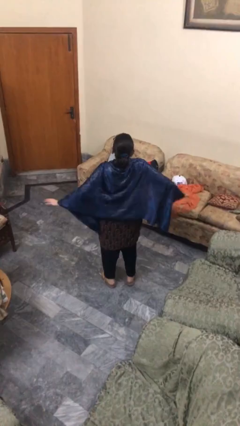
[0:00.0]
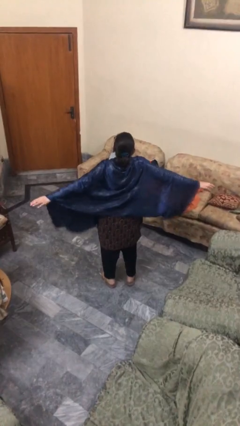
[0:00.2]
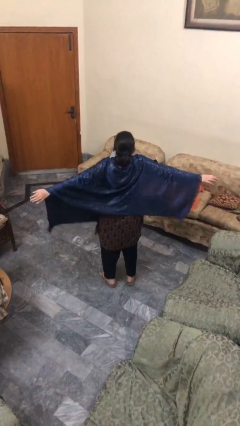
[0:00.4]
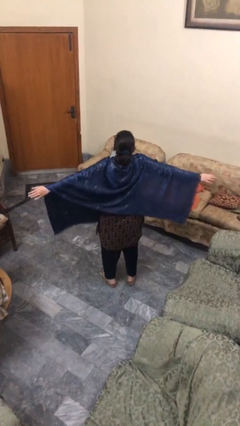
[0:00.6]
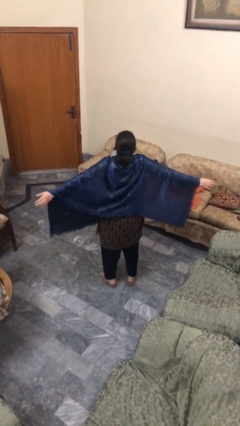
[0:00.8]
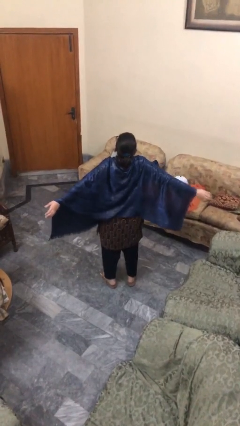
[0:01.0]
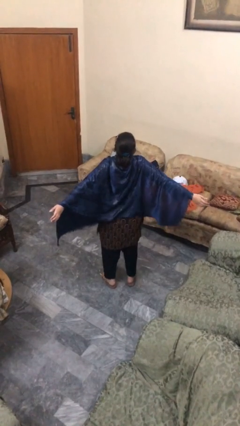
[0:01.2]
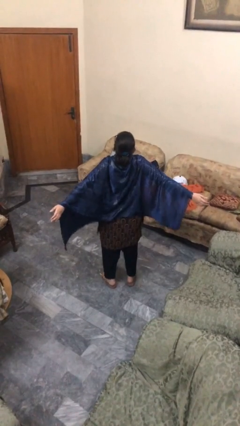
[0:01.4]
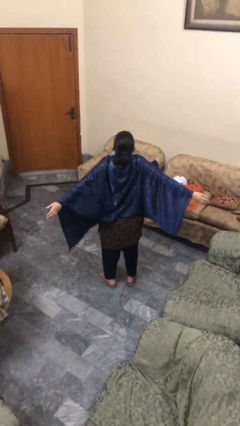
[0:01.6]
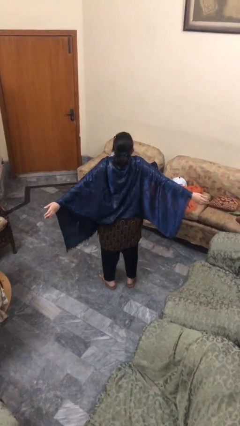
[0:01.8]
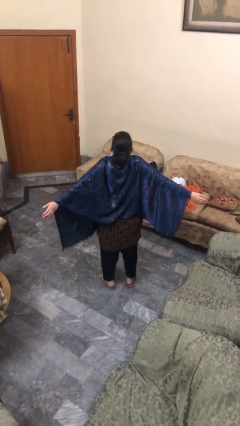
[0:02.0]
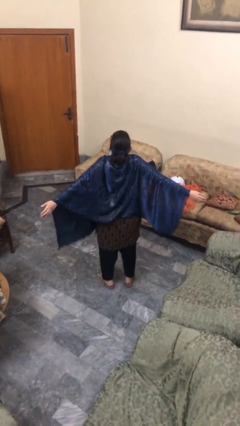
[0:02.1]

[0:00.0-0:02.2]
person stretches arms to side

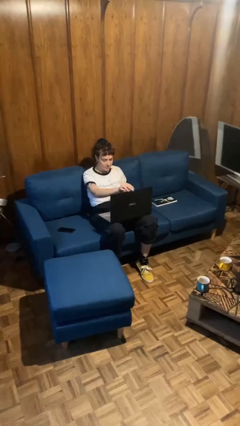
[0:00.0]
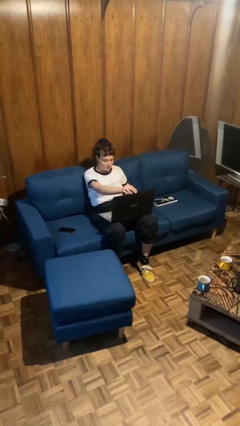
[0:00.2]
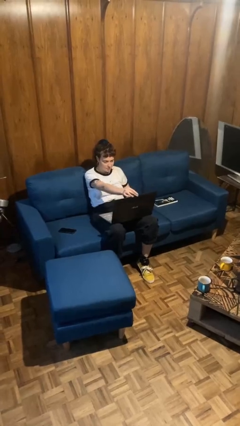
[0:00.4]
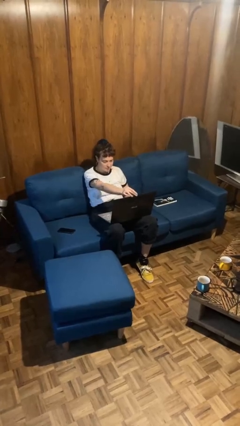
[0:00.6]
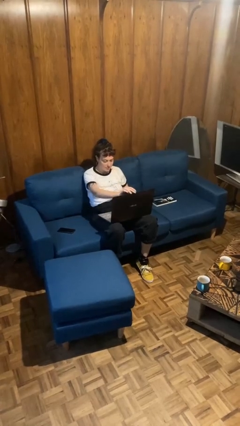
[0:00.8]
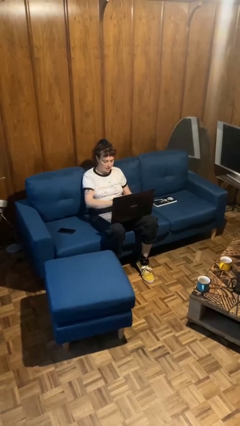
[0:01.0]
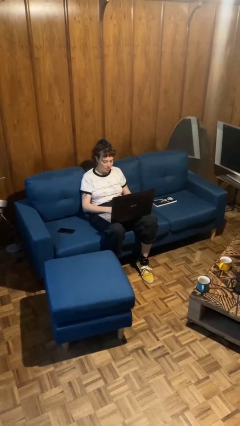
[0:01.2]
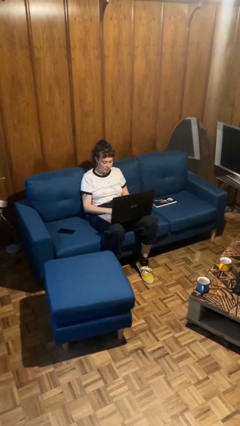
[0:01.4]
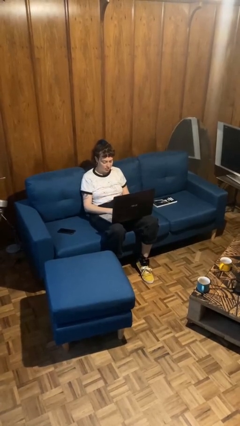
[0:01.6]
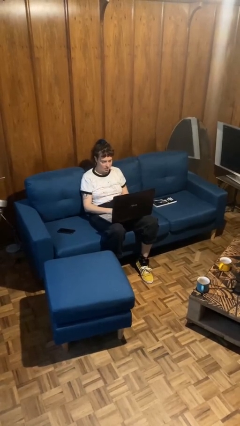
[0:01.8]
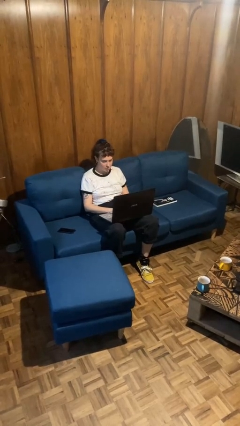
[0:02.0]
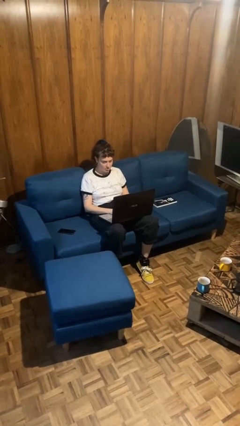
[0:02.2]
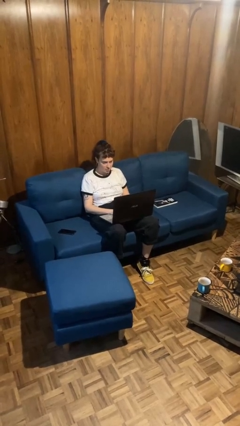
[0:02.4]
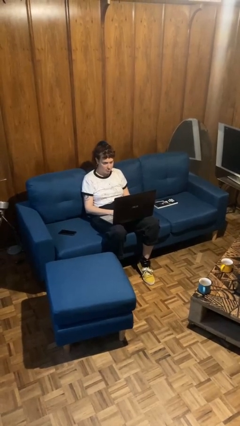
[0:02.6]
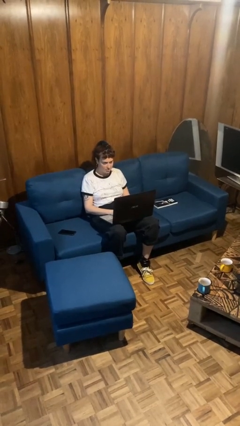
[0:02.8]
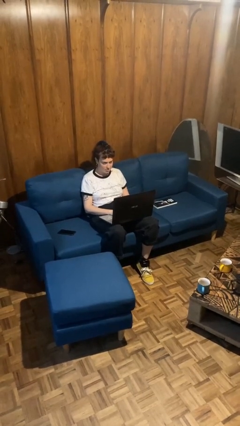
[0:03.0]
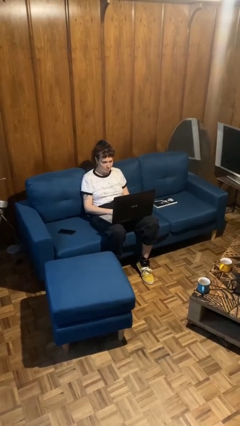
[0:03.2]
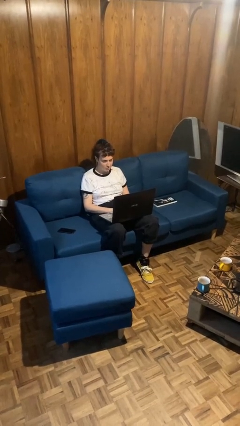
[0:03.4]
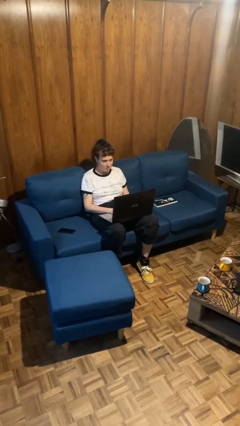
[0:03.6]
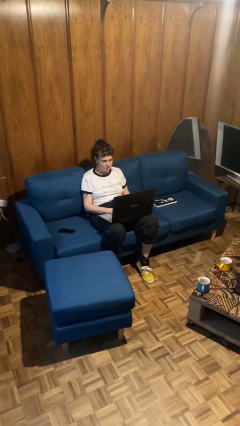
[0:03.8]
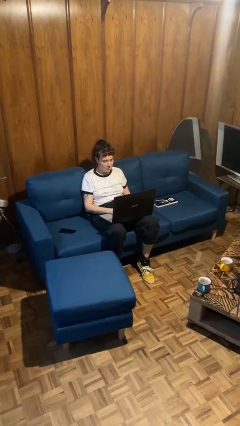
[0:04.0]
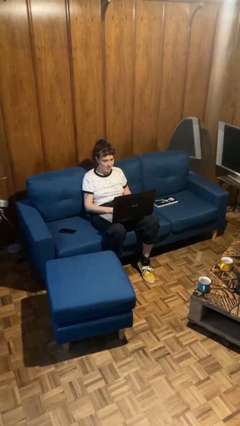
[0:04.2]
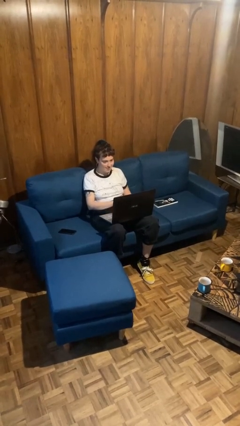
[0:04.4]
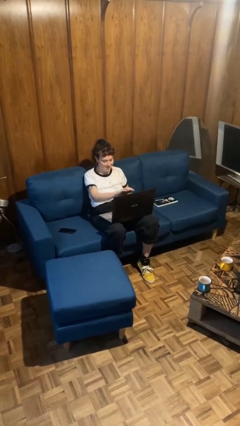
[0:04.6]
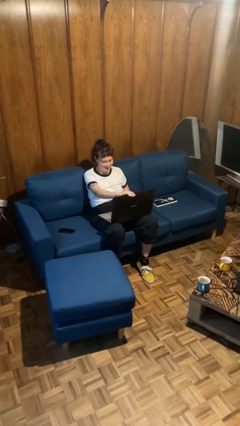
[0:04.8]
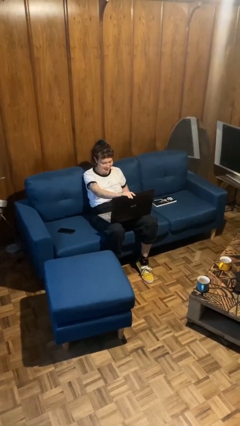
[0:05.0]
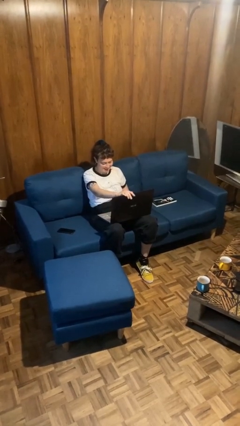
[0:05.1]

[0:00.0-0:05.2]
person interacts with laptop

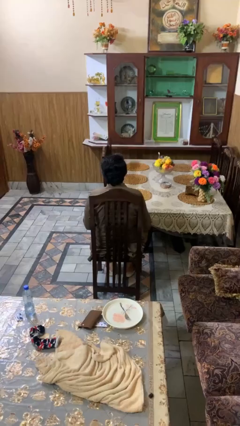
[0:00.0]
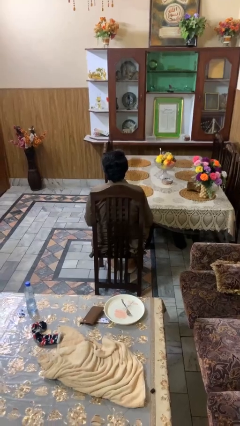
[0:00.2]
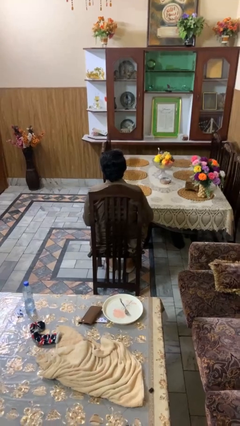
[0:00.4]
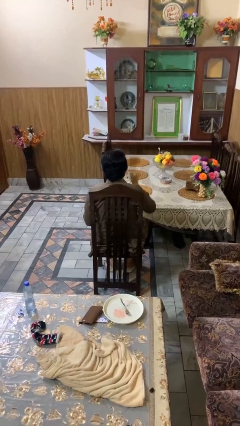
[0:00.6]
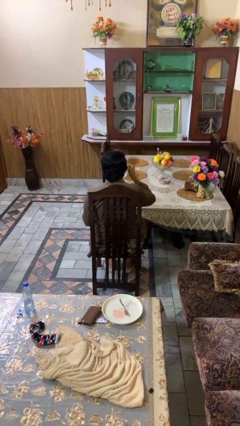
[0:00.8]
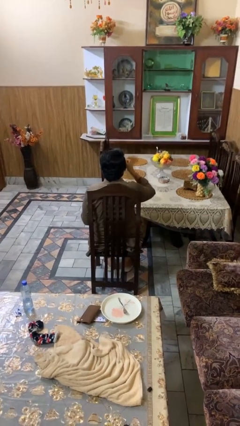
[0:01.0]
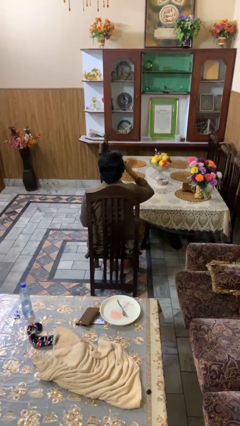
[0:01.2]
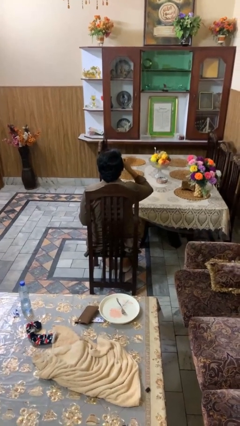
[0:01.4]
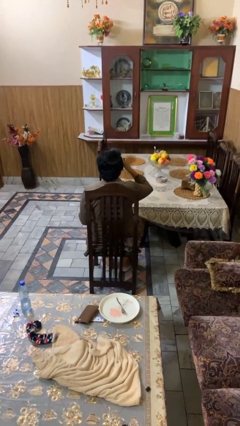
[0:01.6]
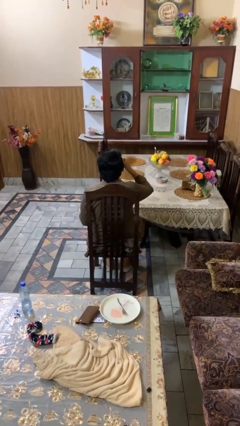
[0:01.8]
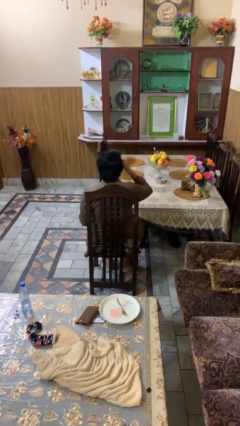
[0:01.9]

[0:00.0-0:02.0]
person drinks from mug

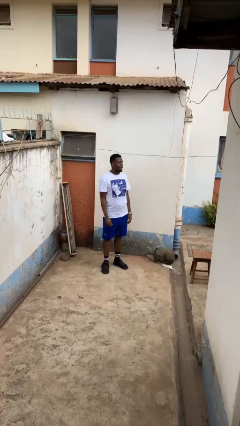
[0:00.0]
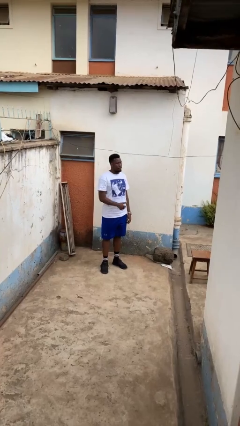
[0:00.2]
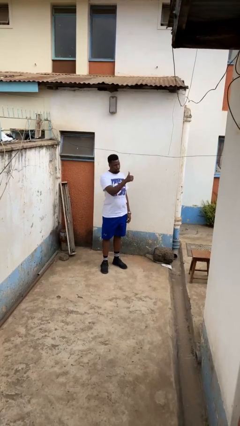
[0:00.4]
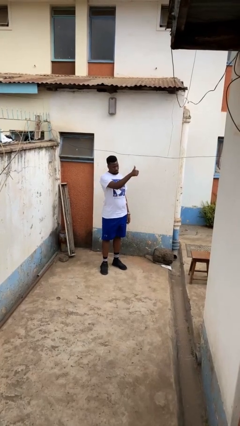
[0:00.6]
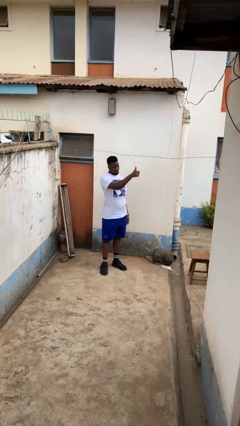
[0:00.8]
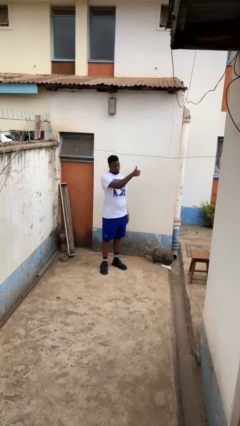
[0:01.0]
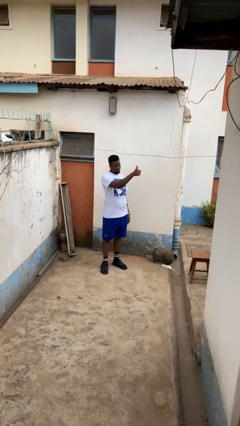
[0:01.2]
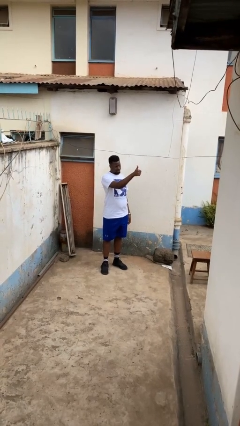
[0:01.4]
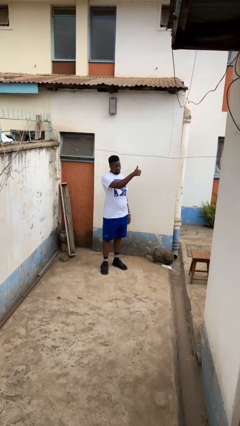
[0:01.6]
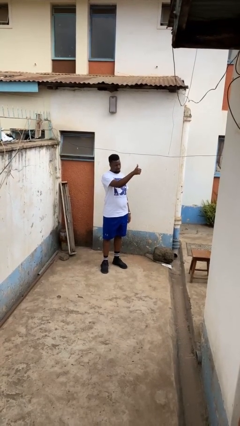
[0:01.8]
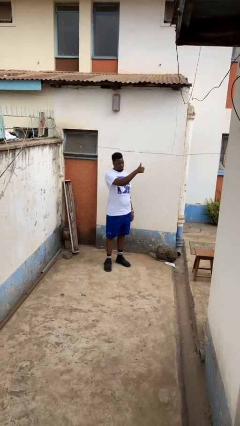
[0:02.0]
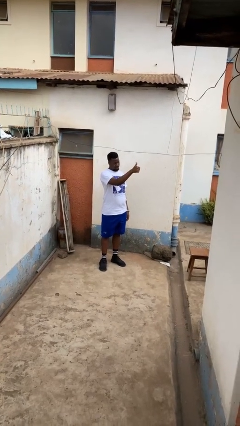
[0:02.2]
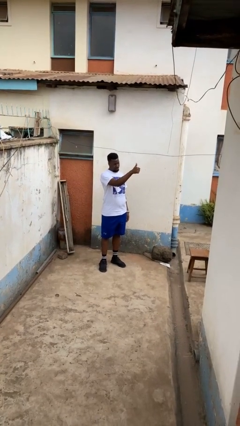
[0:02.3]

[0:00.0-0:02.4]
person gestures thumbs up

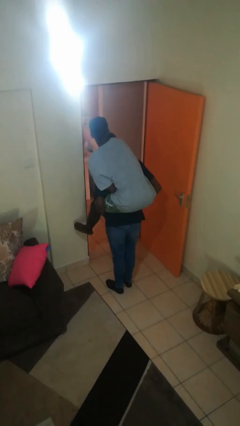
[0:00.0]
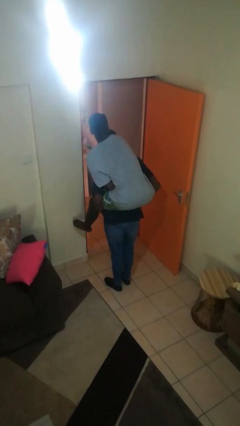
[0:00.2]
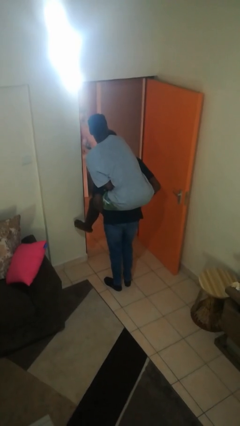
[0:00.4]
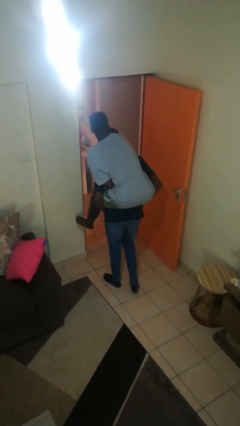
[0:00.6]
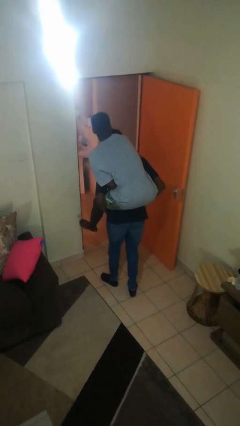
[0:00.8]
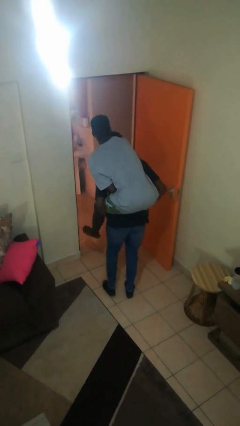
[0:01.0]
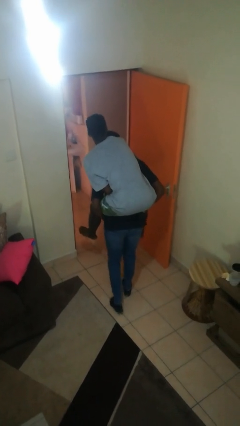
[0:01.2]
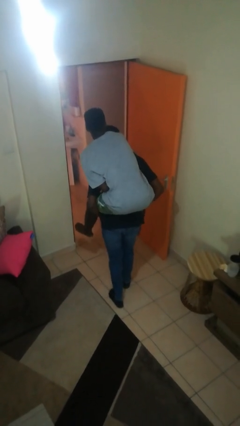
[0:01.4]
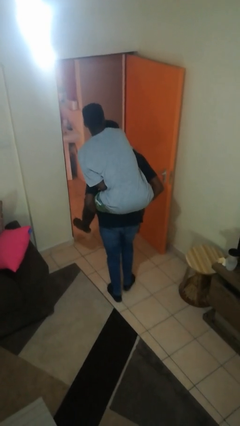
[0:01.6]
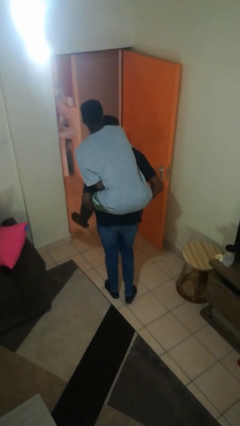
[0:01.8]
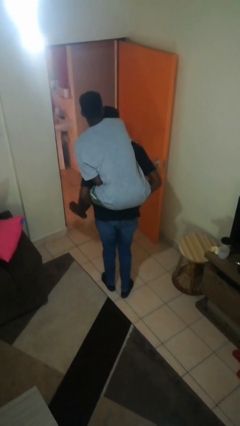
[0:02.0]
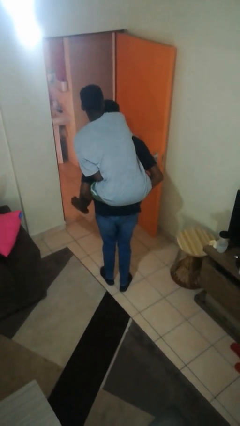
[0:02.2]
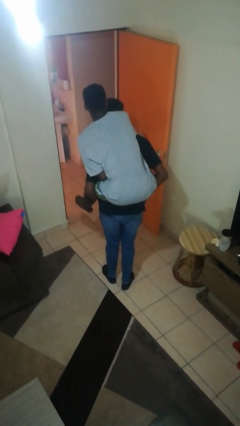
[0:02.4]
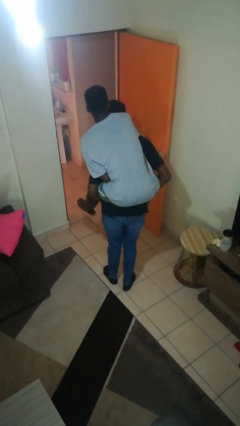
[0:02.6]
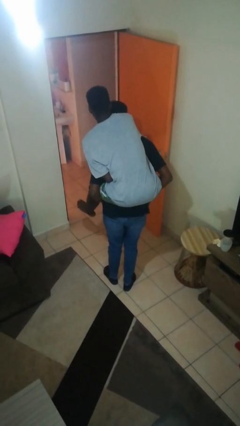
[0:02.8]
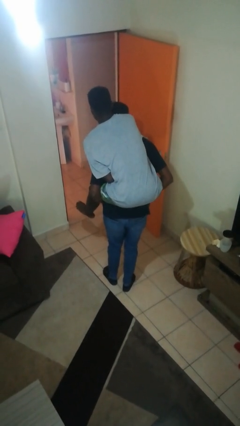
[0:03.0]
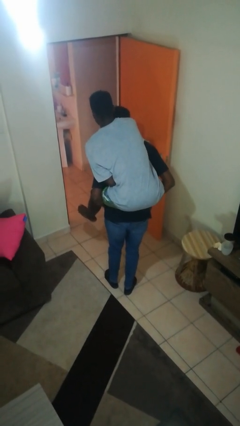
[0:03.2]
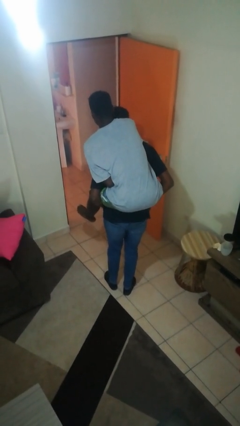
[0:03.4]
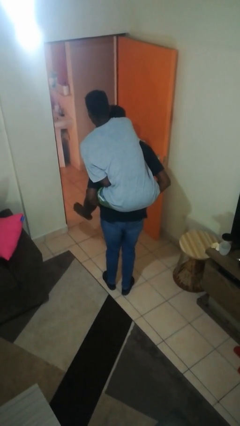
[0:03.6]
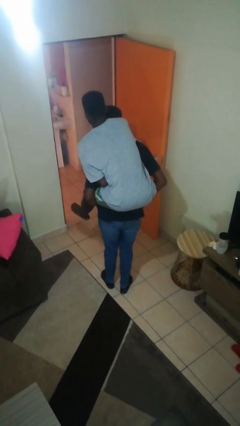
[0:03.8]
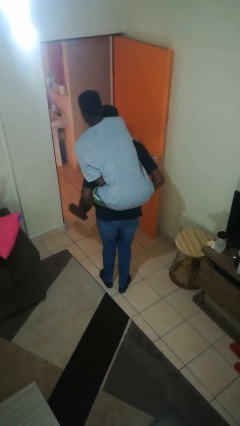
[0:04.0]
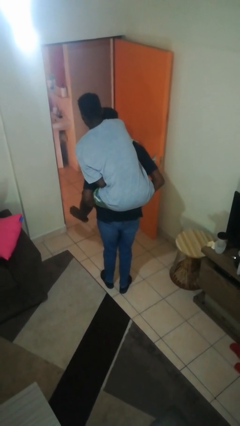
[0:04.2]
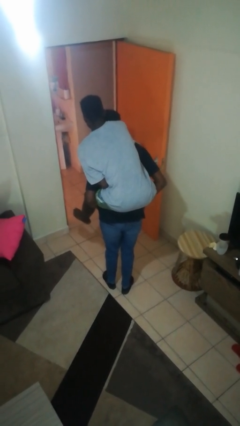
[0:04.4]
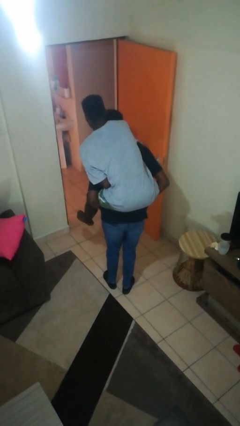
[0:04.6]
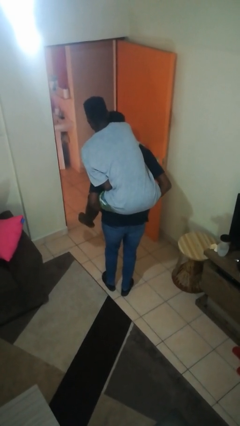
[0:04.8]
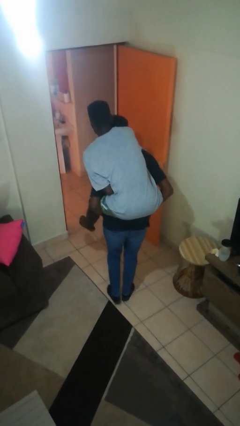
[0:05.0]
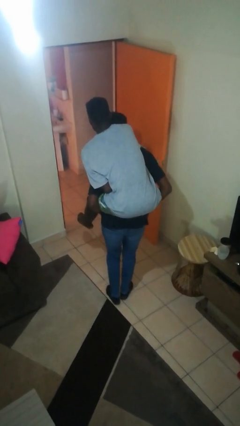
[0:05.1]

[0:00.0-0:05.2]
person carries person on back
